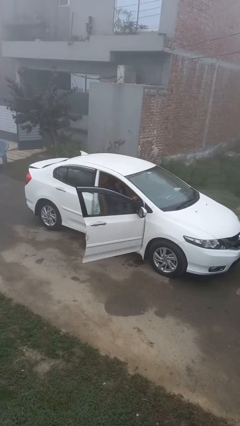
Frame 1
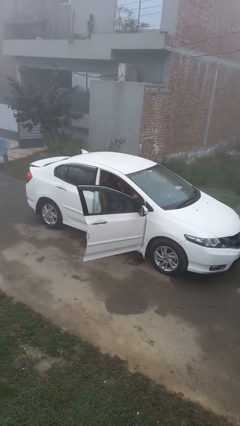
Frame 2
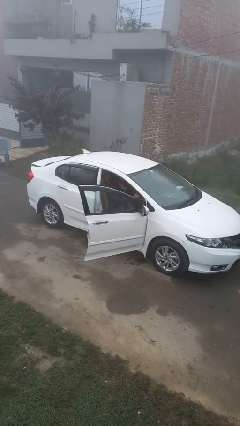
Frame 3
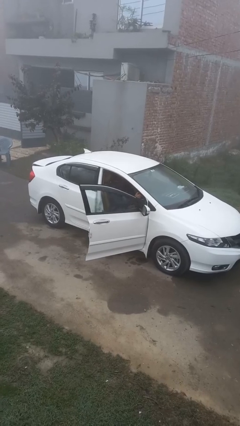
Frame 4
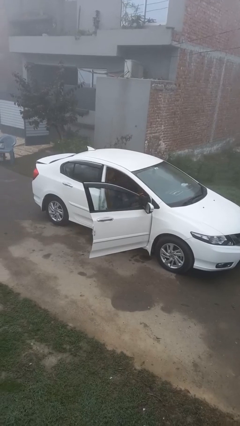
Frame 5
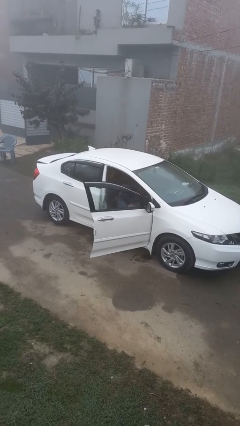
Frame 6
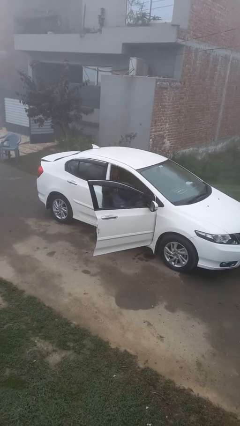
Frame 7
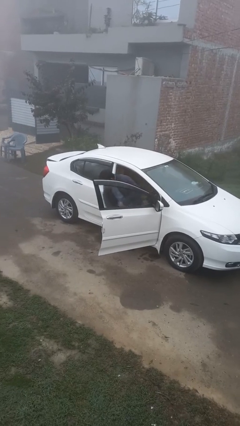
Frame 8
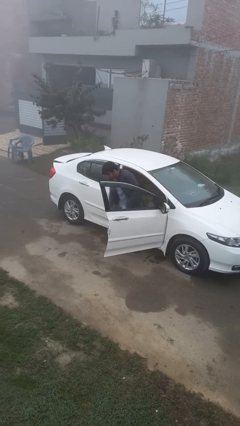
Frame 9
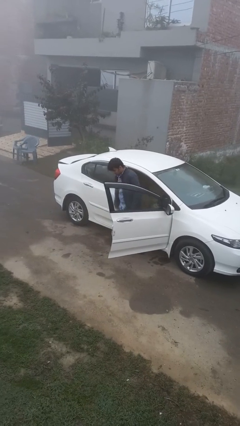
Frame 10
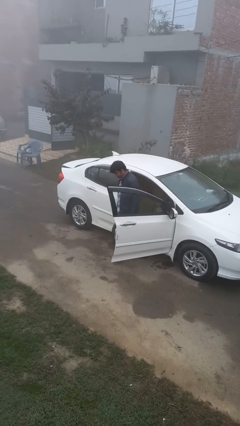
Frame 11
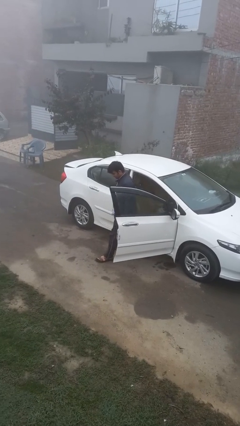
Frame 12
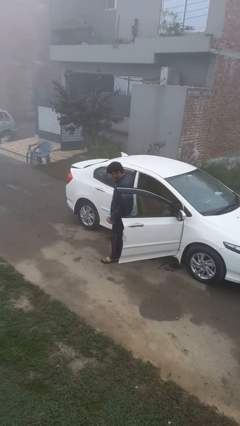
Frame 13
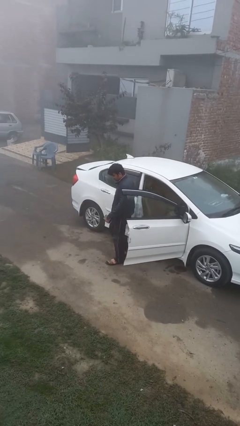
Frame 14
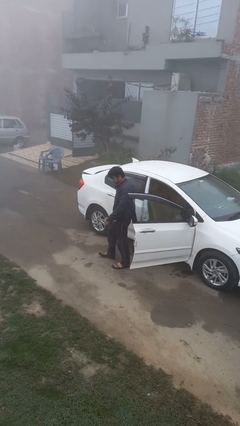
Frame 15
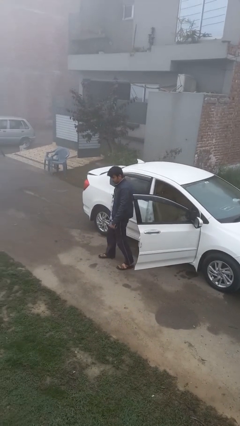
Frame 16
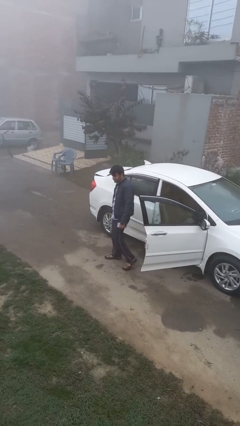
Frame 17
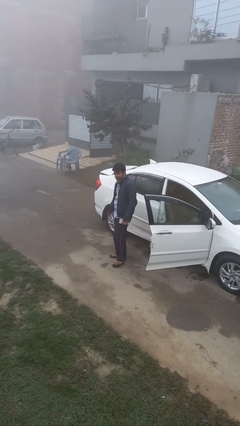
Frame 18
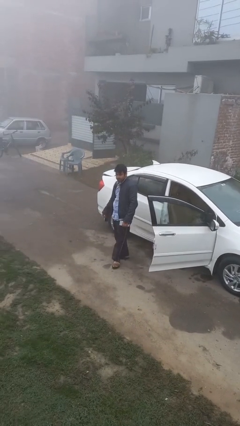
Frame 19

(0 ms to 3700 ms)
person exits car

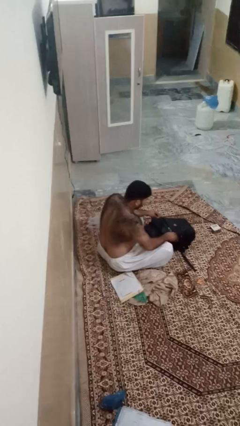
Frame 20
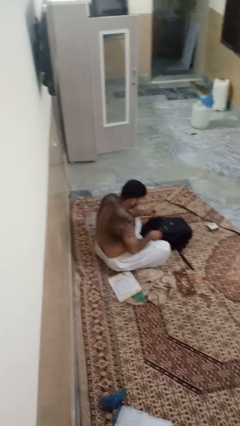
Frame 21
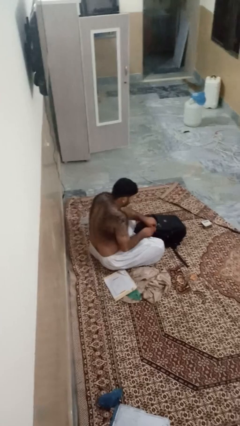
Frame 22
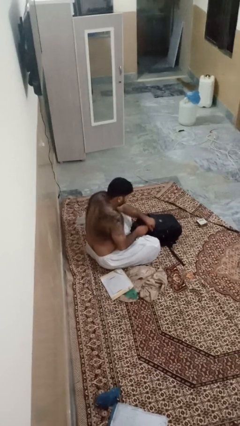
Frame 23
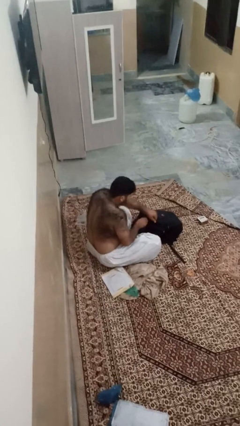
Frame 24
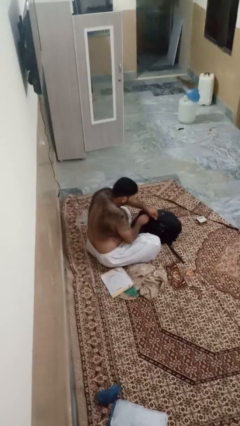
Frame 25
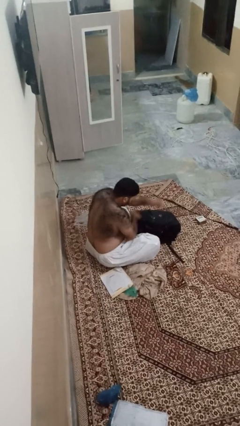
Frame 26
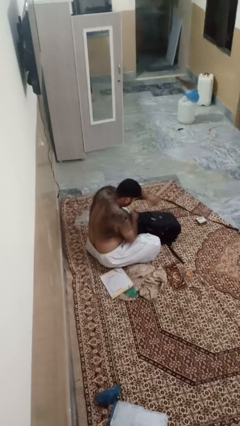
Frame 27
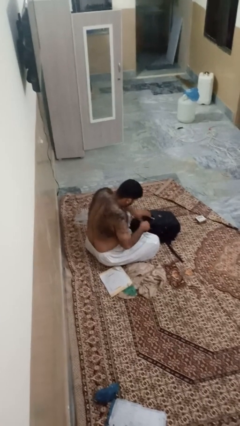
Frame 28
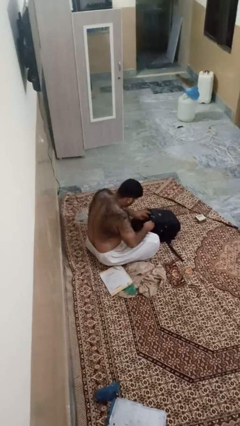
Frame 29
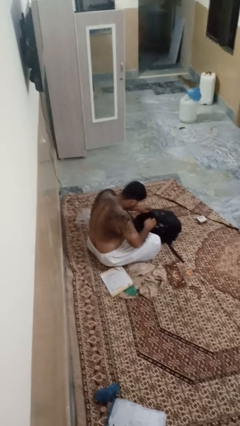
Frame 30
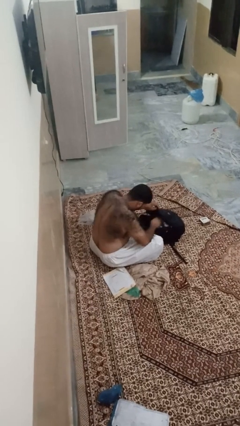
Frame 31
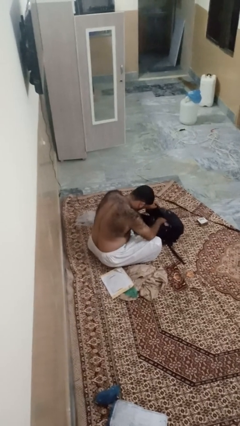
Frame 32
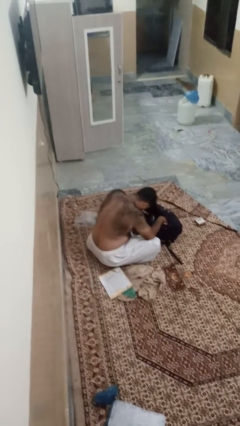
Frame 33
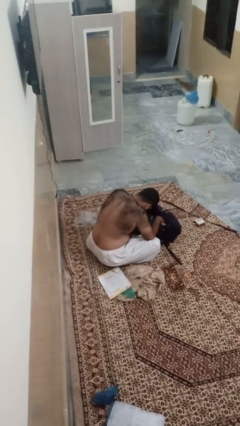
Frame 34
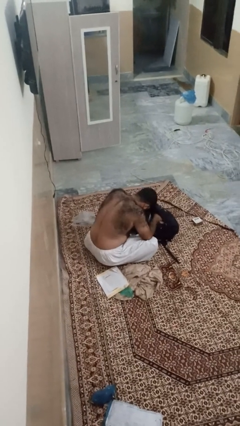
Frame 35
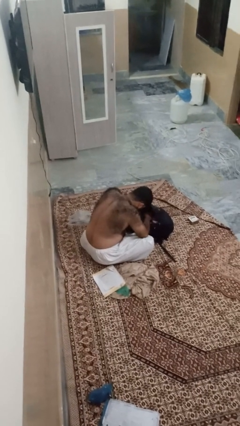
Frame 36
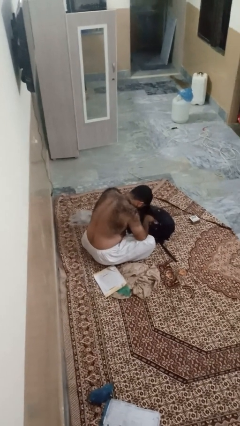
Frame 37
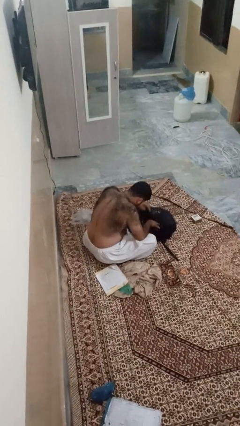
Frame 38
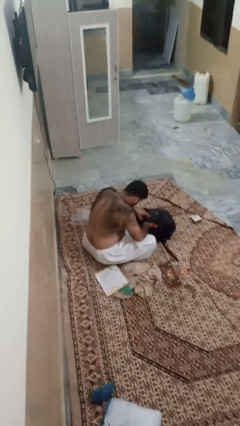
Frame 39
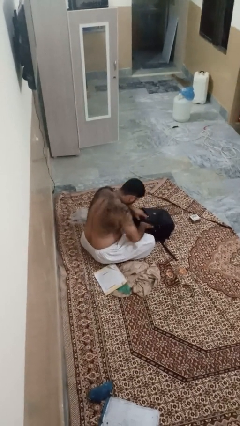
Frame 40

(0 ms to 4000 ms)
person searches in bag

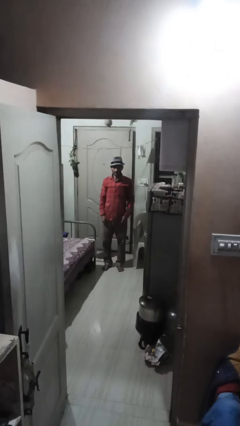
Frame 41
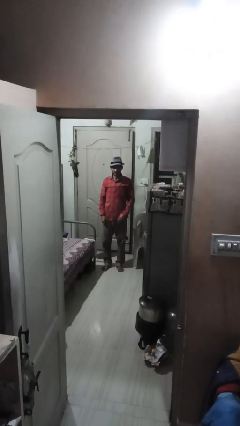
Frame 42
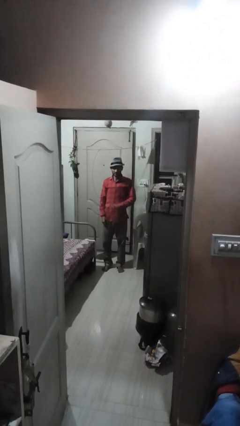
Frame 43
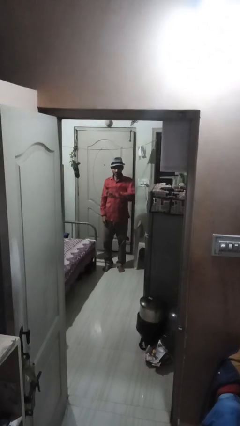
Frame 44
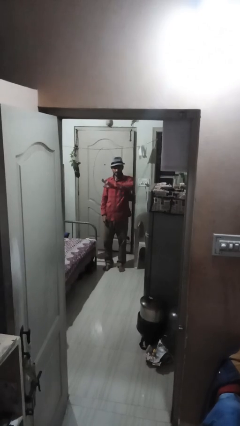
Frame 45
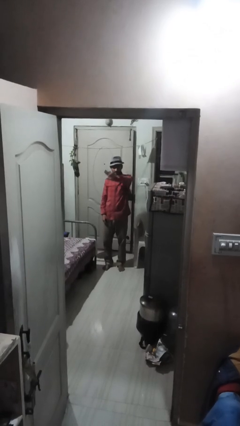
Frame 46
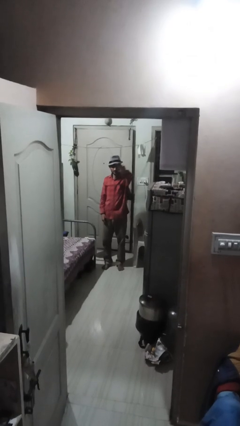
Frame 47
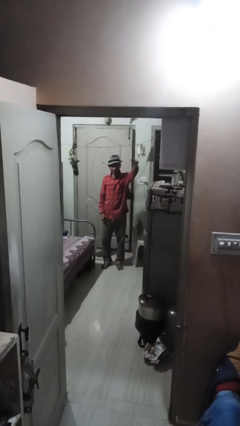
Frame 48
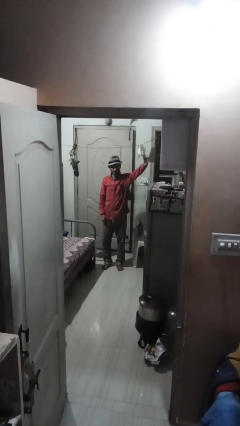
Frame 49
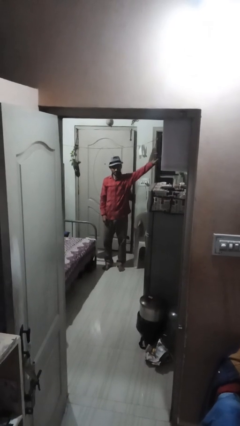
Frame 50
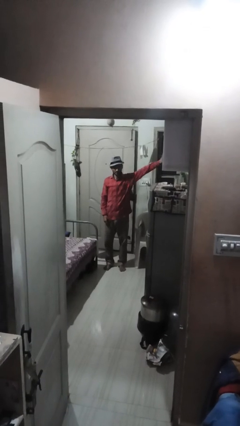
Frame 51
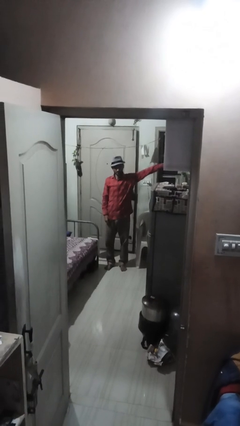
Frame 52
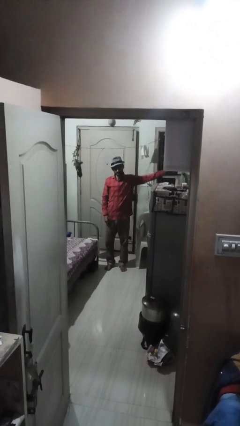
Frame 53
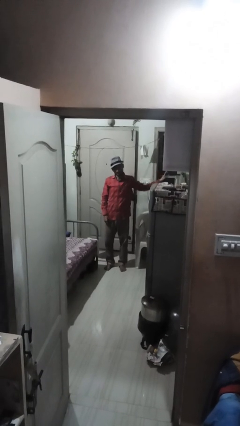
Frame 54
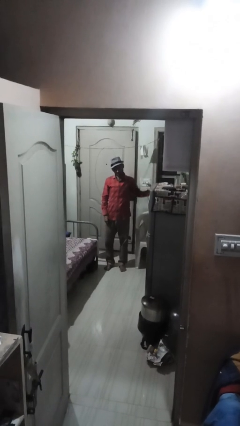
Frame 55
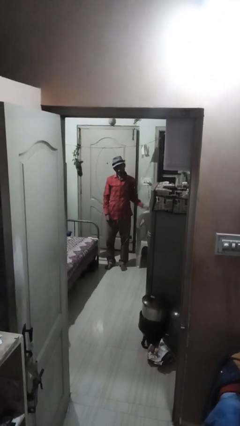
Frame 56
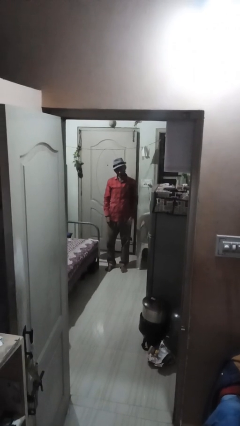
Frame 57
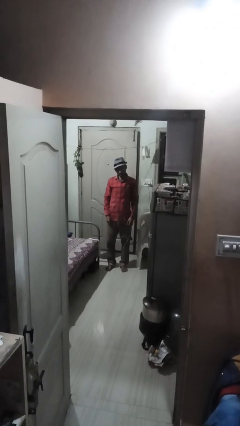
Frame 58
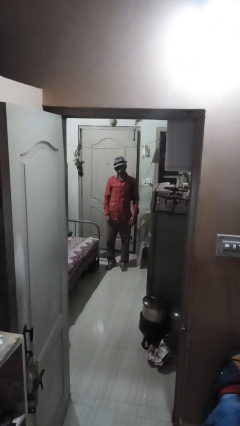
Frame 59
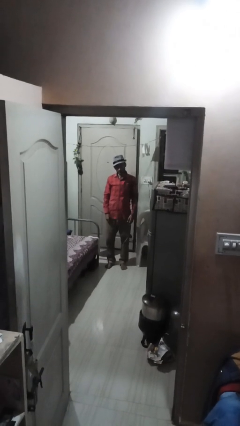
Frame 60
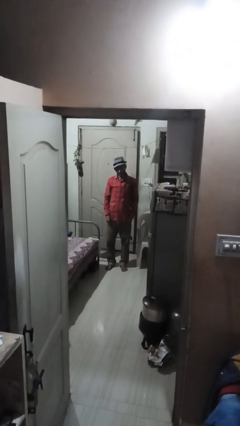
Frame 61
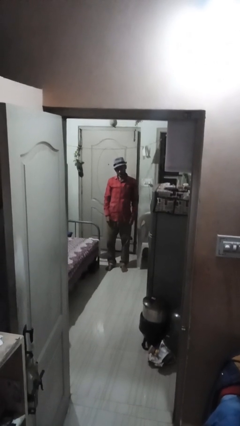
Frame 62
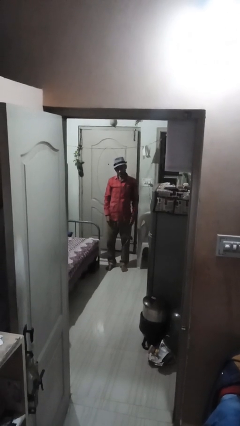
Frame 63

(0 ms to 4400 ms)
person gestures swipe left

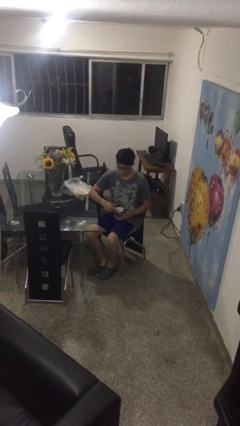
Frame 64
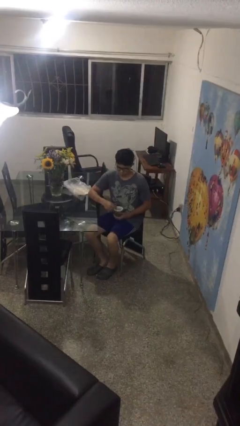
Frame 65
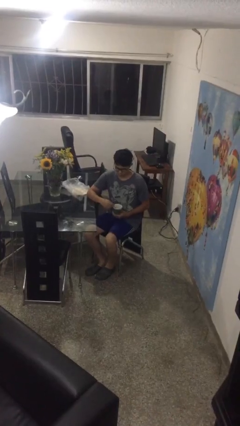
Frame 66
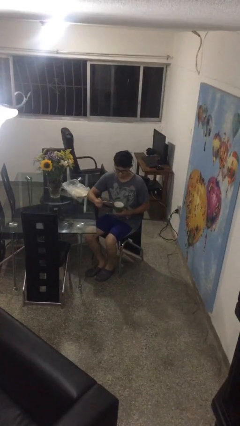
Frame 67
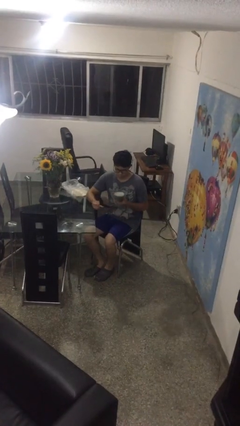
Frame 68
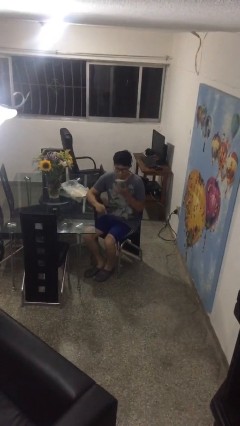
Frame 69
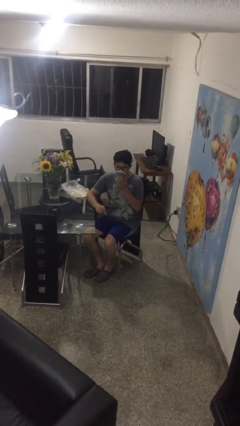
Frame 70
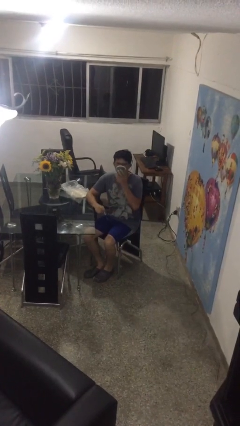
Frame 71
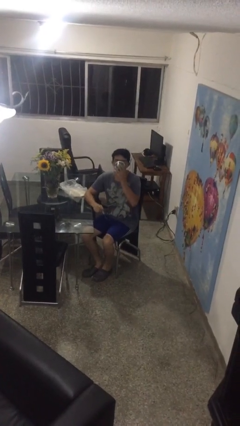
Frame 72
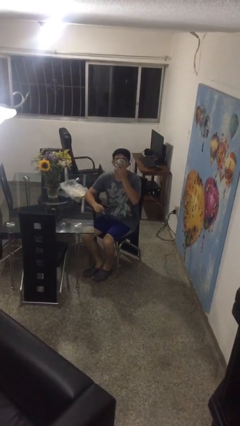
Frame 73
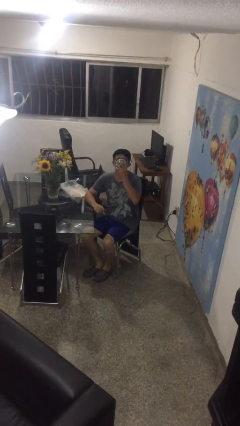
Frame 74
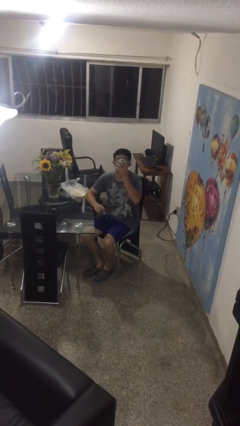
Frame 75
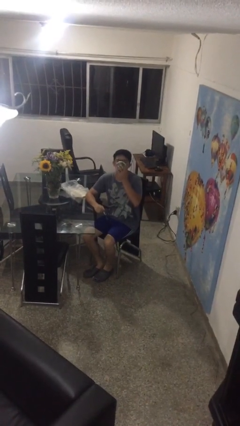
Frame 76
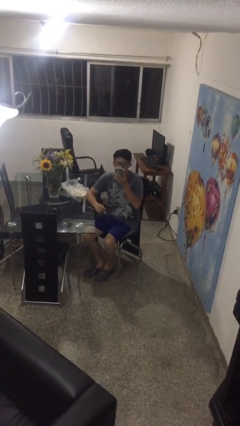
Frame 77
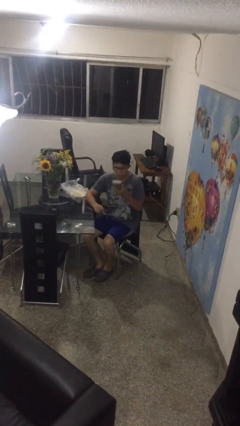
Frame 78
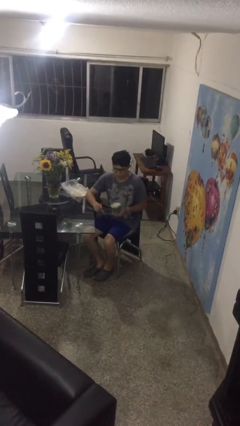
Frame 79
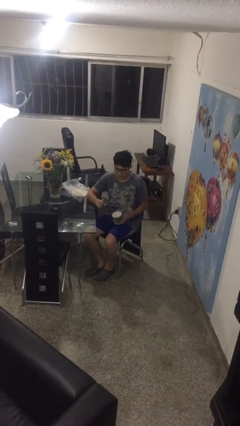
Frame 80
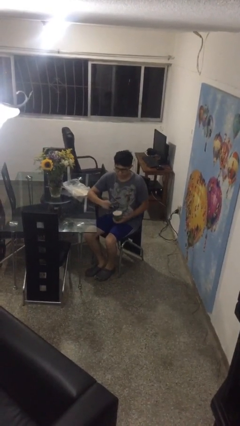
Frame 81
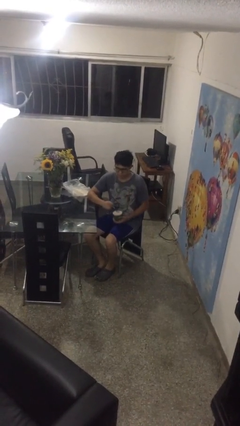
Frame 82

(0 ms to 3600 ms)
person drinks from mug

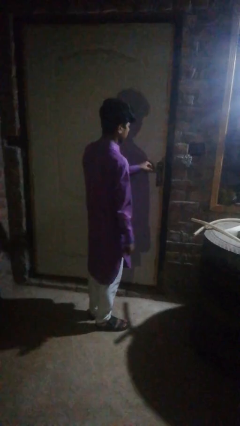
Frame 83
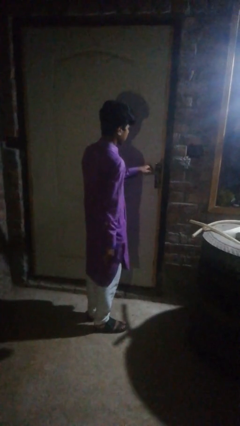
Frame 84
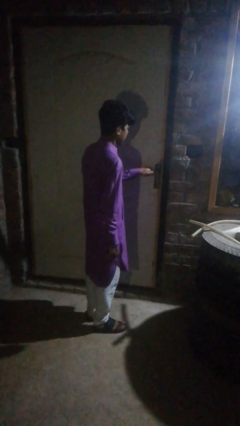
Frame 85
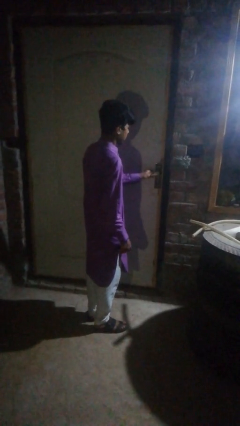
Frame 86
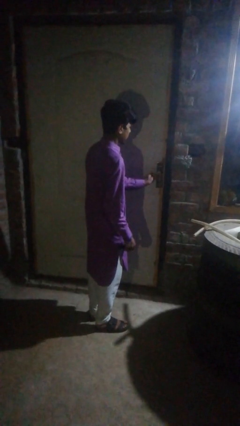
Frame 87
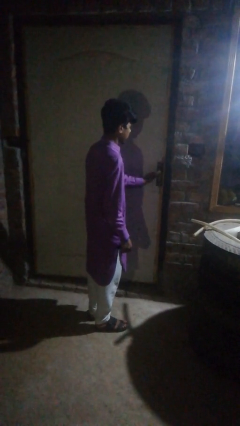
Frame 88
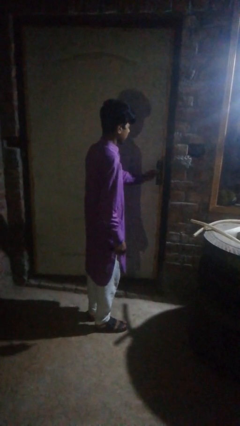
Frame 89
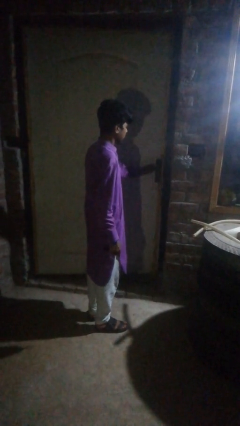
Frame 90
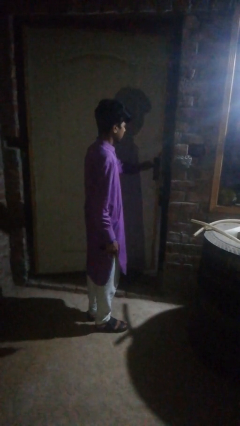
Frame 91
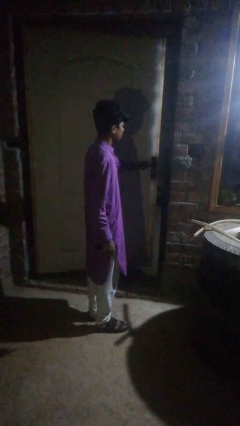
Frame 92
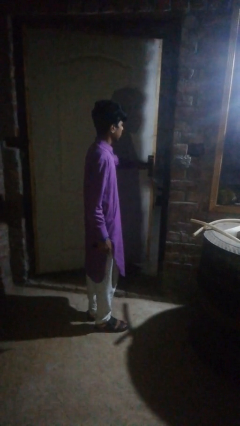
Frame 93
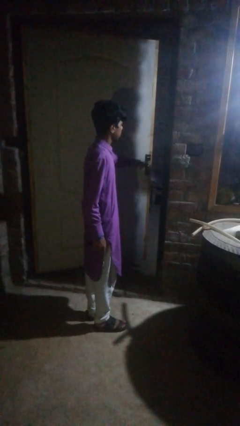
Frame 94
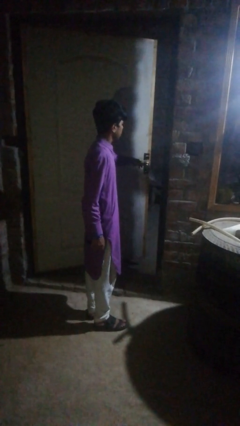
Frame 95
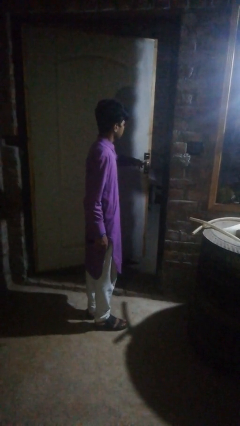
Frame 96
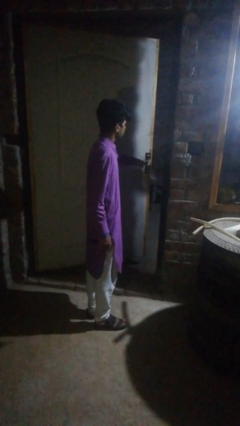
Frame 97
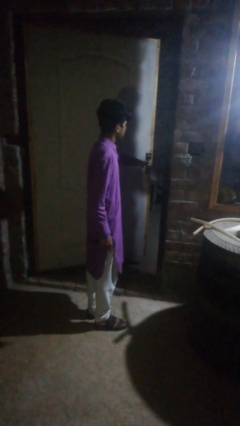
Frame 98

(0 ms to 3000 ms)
person opens facility door
